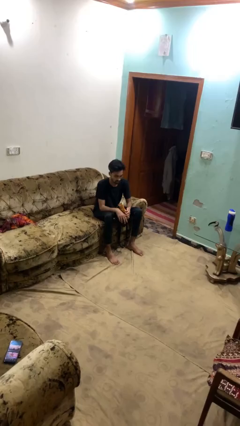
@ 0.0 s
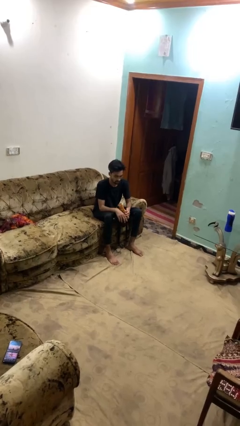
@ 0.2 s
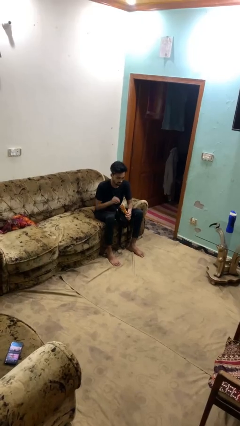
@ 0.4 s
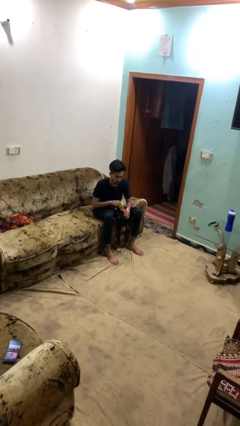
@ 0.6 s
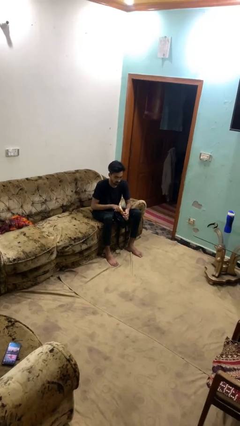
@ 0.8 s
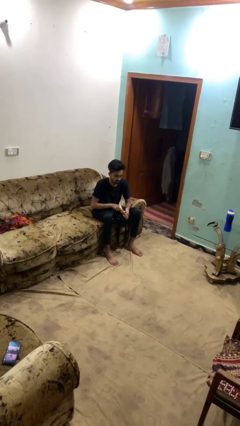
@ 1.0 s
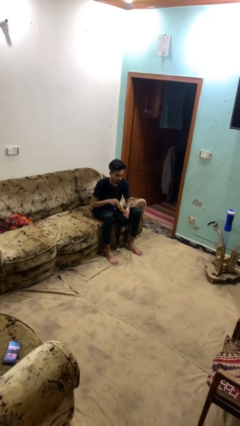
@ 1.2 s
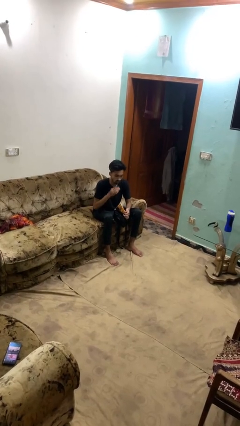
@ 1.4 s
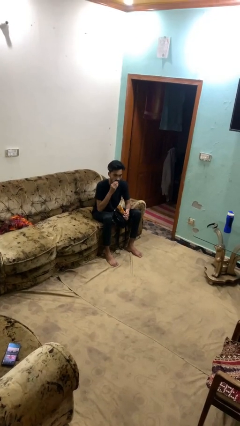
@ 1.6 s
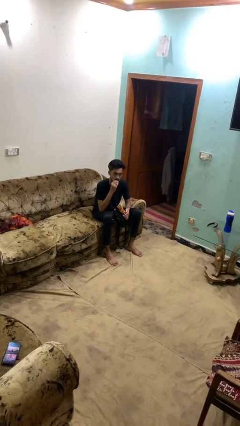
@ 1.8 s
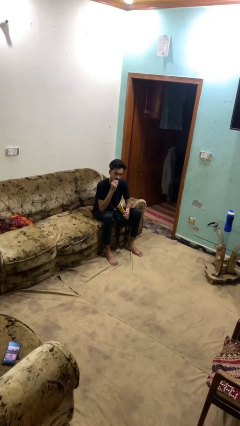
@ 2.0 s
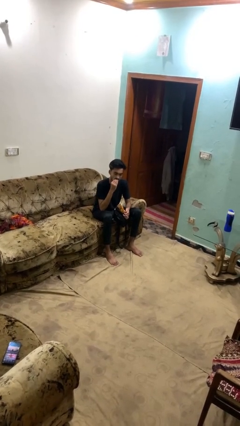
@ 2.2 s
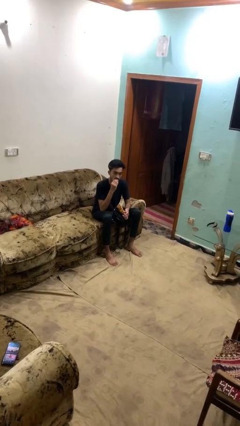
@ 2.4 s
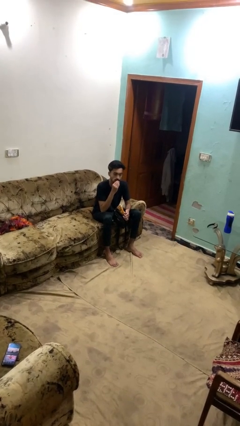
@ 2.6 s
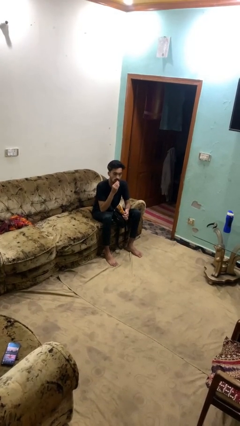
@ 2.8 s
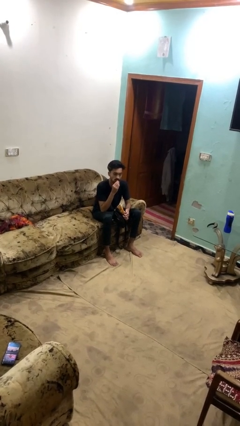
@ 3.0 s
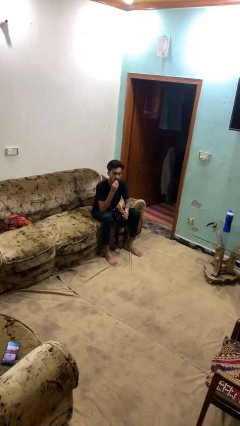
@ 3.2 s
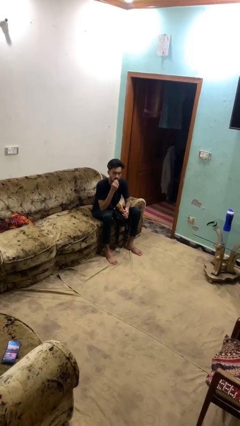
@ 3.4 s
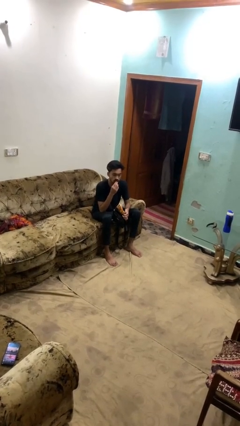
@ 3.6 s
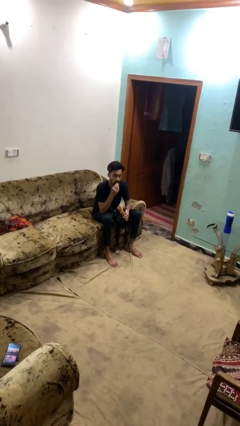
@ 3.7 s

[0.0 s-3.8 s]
person eats snack from bag

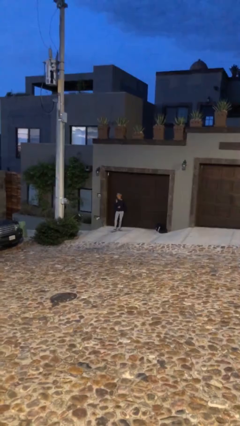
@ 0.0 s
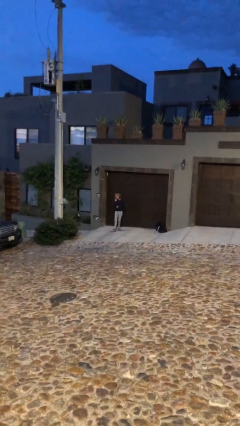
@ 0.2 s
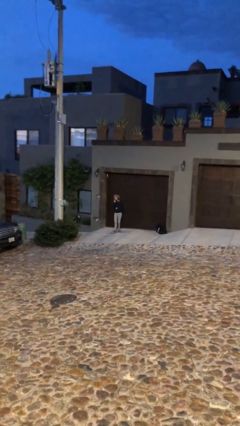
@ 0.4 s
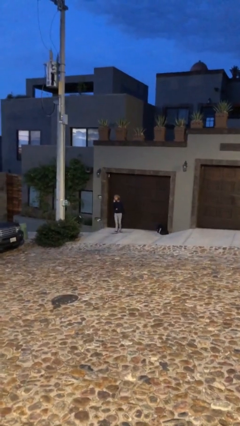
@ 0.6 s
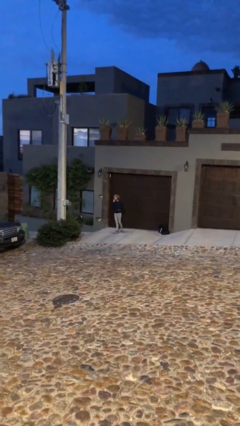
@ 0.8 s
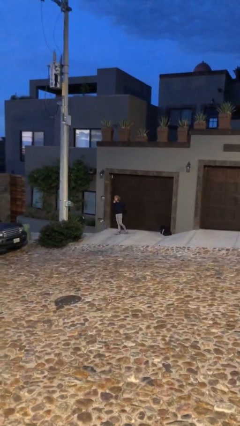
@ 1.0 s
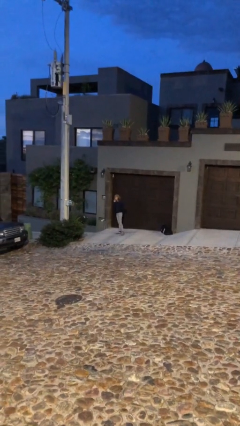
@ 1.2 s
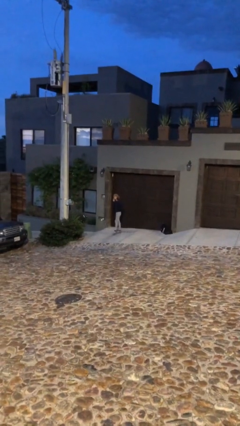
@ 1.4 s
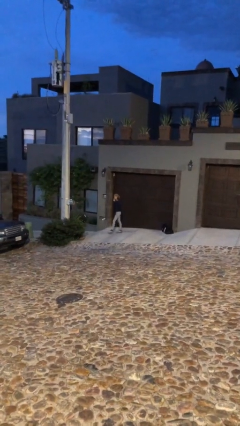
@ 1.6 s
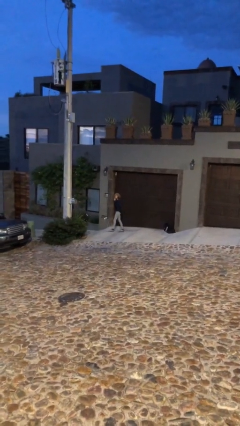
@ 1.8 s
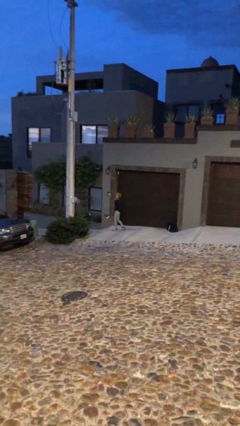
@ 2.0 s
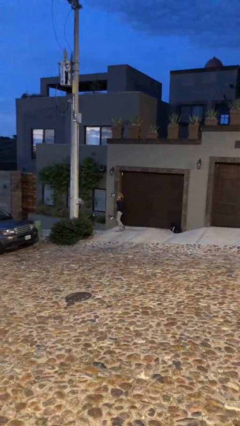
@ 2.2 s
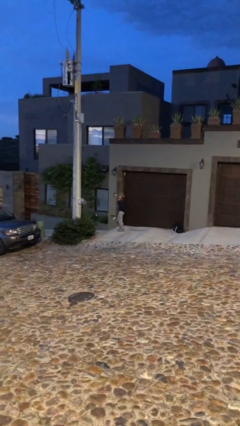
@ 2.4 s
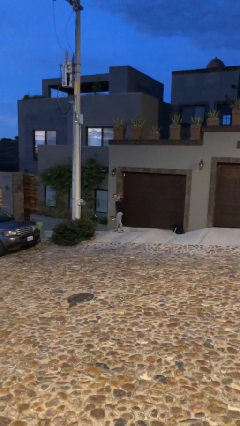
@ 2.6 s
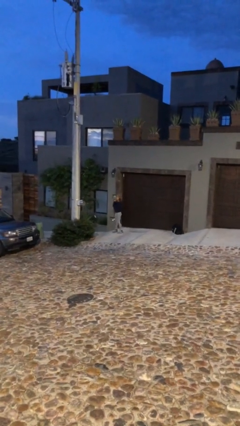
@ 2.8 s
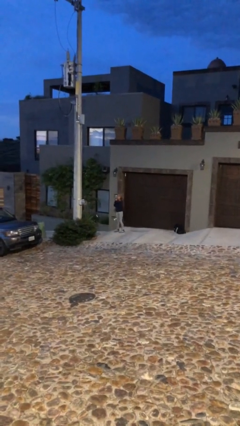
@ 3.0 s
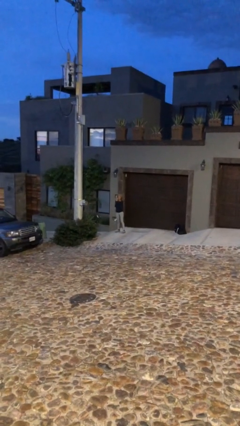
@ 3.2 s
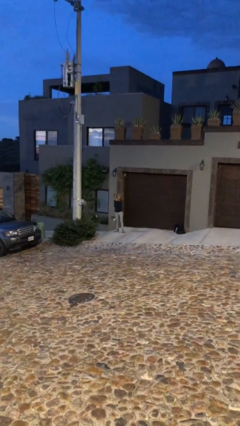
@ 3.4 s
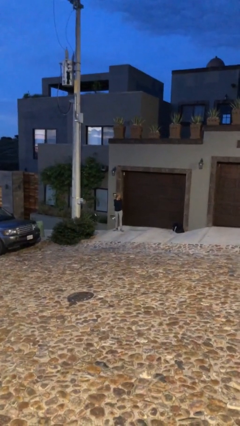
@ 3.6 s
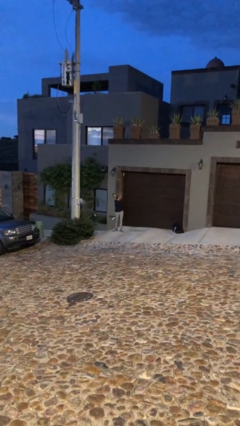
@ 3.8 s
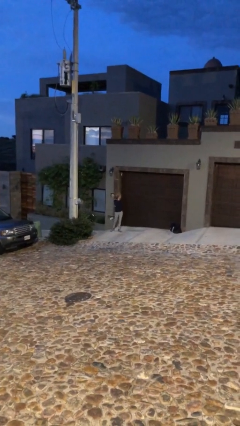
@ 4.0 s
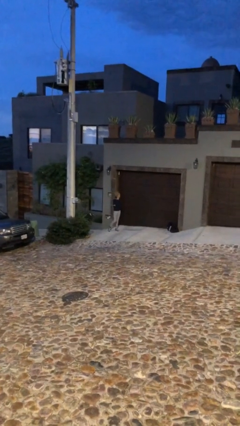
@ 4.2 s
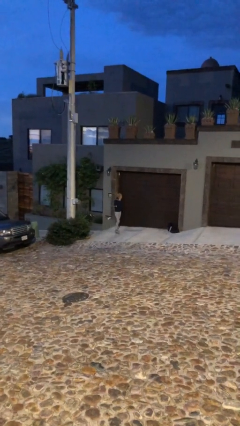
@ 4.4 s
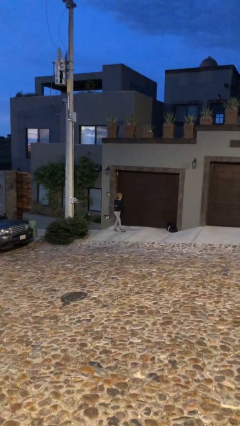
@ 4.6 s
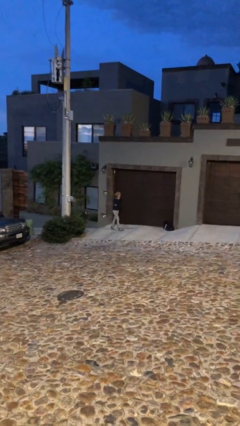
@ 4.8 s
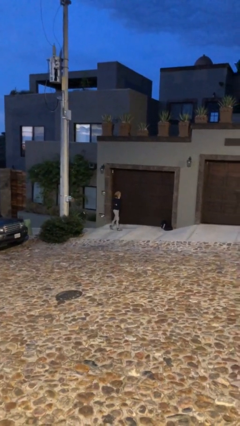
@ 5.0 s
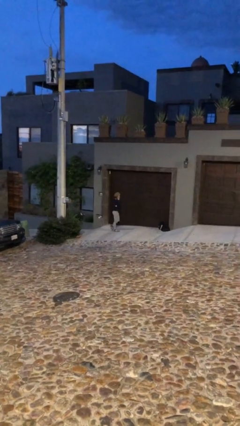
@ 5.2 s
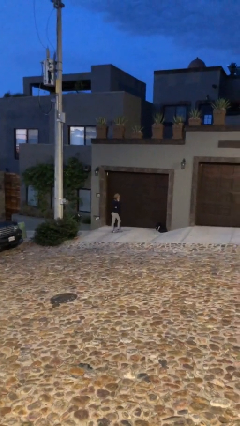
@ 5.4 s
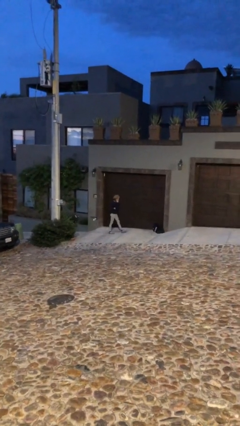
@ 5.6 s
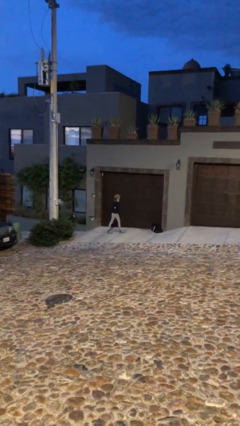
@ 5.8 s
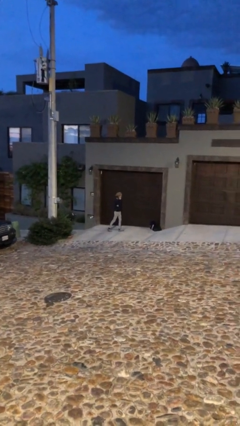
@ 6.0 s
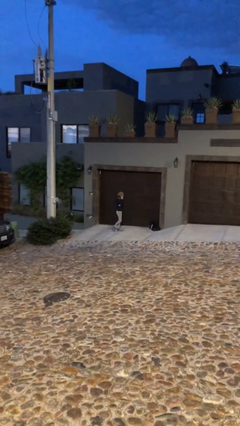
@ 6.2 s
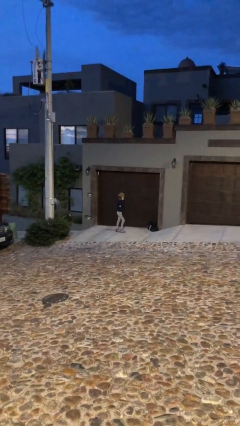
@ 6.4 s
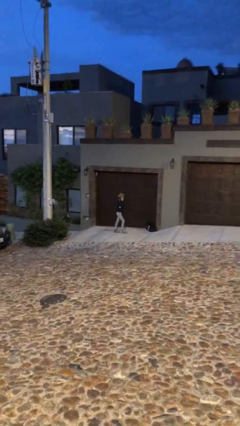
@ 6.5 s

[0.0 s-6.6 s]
person talks on phone

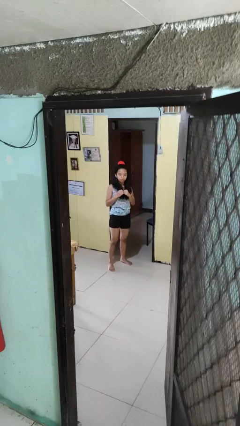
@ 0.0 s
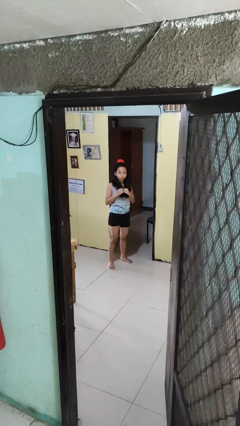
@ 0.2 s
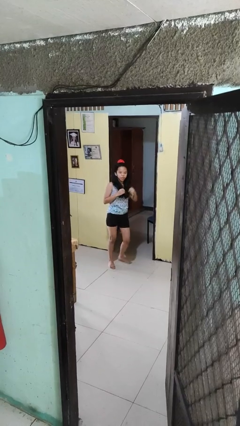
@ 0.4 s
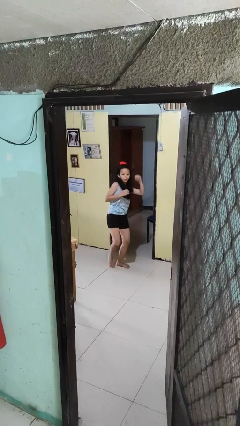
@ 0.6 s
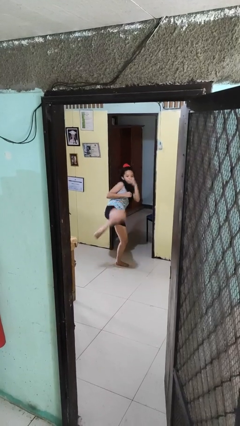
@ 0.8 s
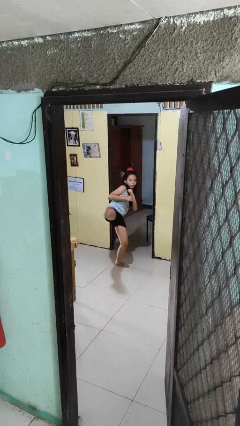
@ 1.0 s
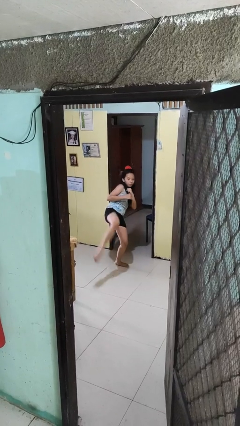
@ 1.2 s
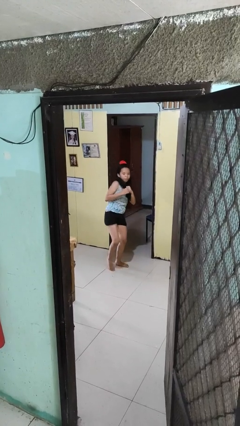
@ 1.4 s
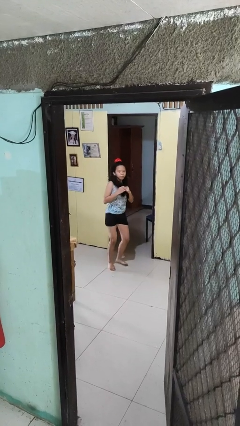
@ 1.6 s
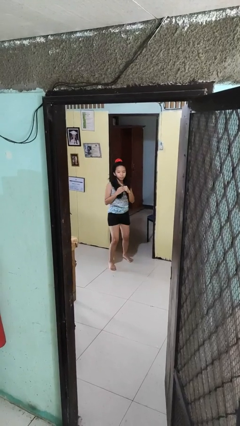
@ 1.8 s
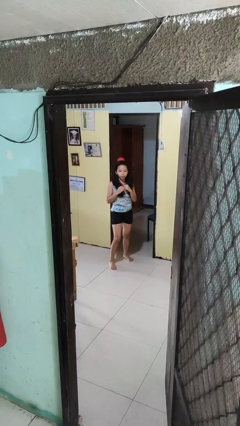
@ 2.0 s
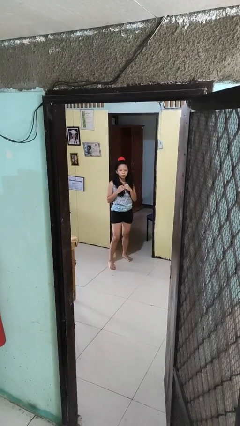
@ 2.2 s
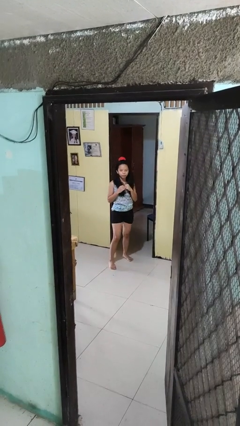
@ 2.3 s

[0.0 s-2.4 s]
person karate kicks

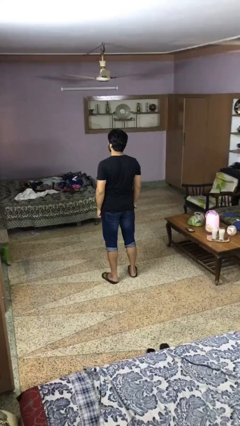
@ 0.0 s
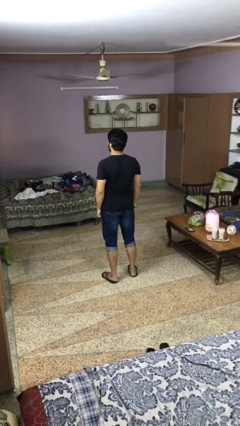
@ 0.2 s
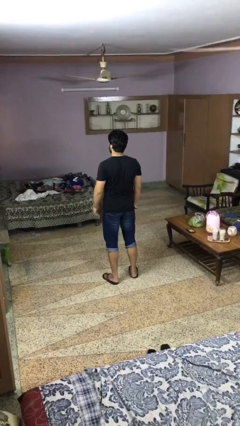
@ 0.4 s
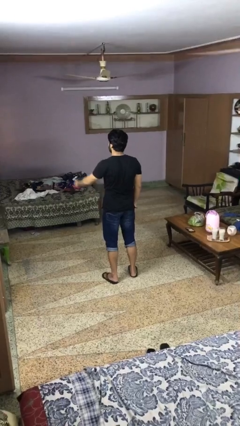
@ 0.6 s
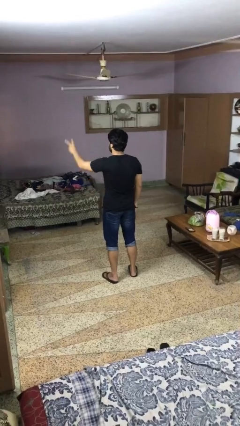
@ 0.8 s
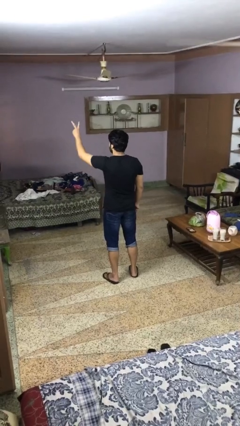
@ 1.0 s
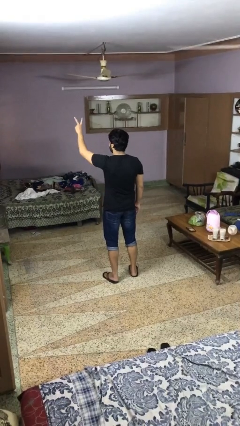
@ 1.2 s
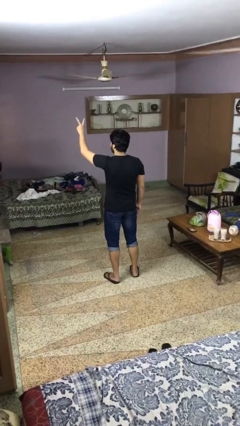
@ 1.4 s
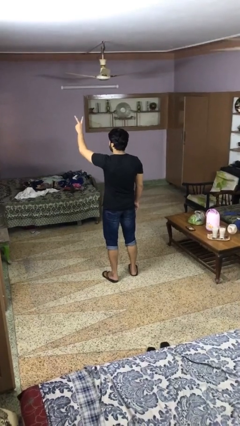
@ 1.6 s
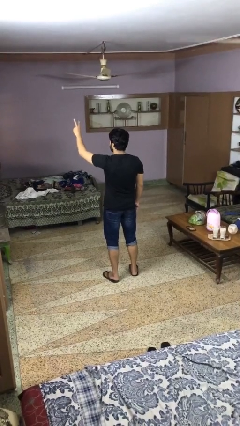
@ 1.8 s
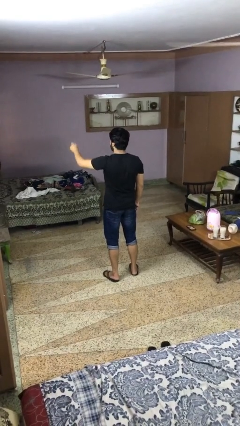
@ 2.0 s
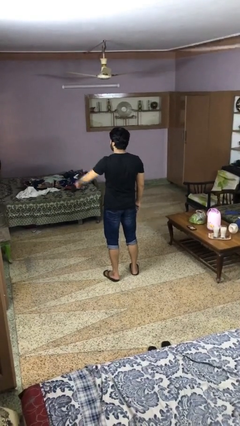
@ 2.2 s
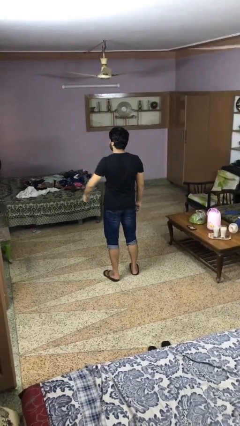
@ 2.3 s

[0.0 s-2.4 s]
person gestures peace

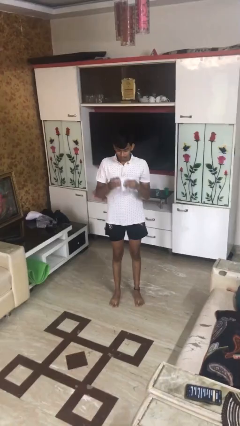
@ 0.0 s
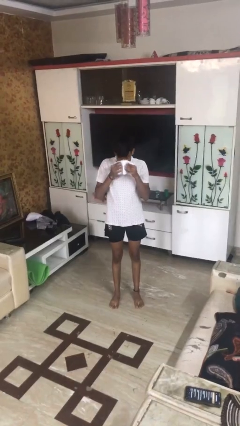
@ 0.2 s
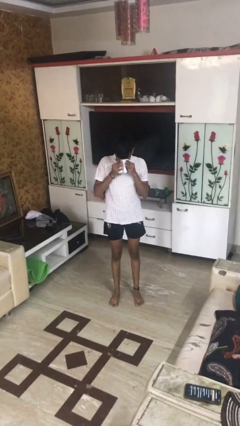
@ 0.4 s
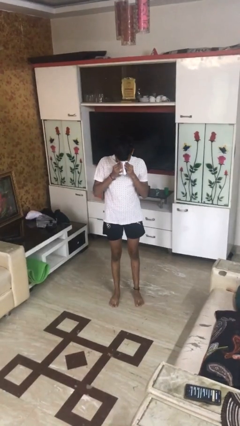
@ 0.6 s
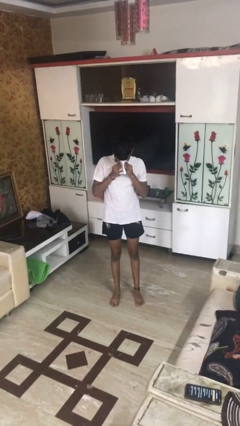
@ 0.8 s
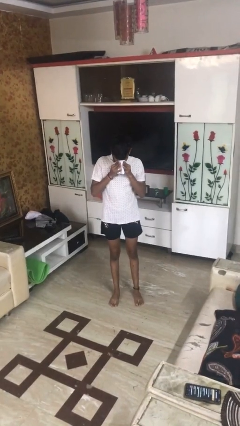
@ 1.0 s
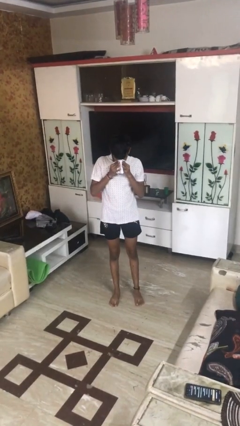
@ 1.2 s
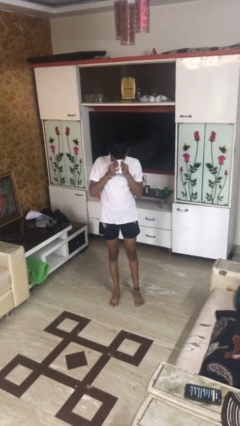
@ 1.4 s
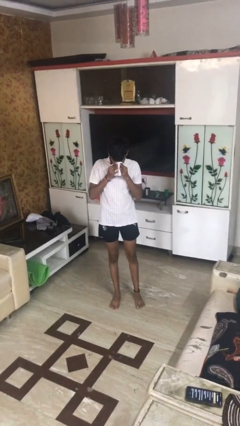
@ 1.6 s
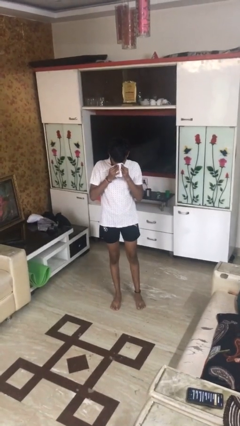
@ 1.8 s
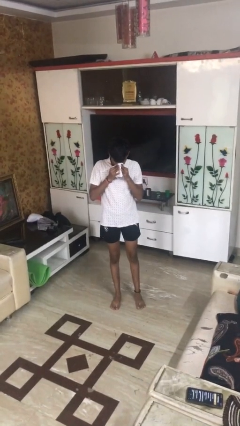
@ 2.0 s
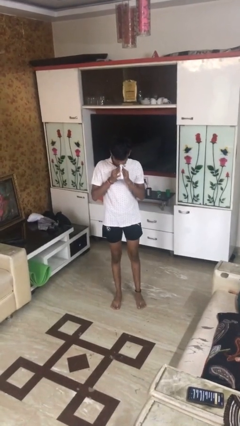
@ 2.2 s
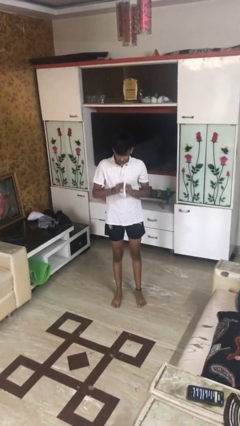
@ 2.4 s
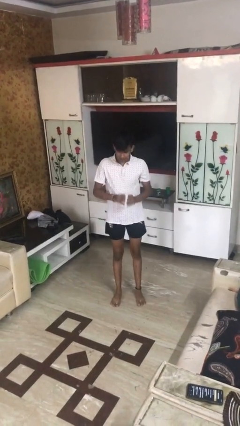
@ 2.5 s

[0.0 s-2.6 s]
person blows nose
